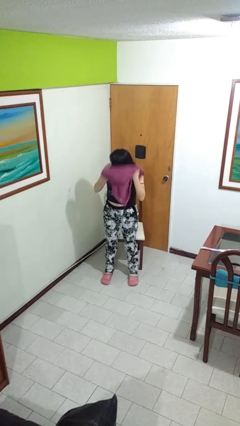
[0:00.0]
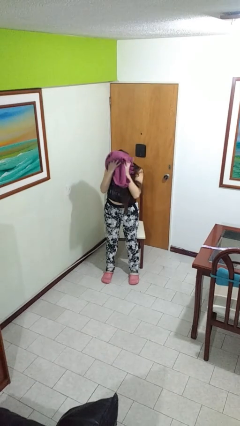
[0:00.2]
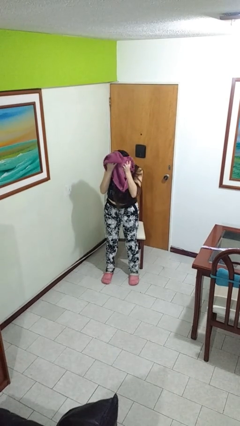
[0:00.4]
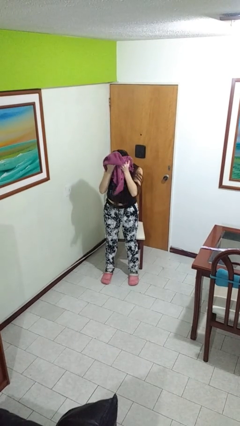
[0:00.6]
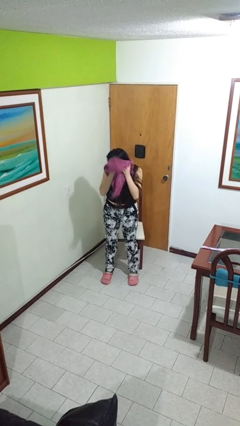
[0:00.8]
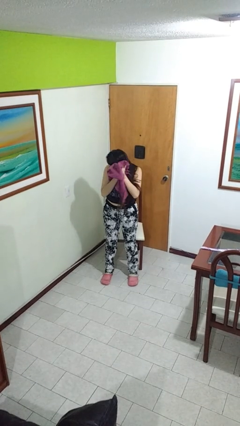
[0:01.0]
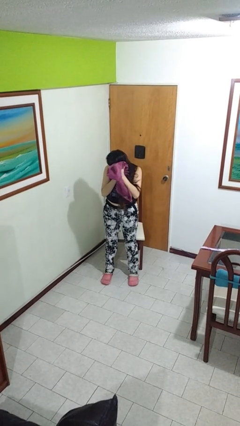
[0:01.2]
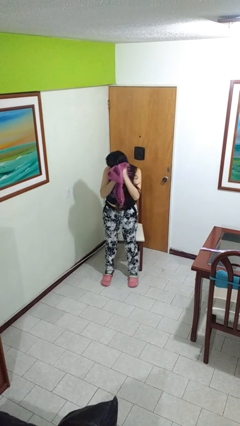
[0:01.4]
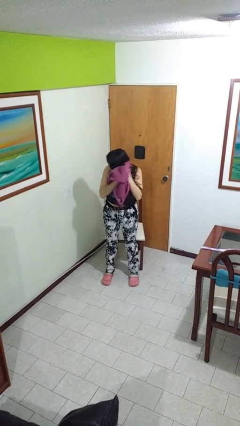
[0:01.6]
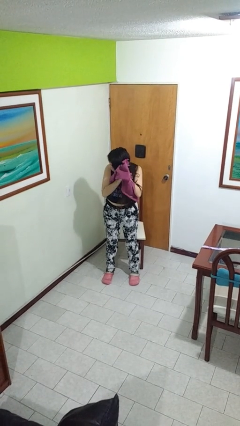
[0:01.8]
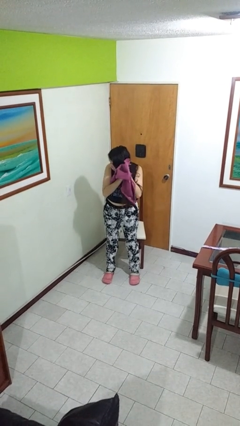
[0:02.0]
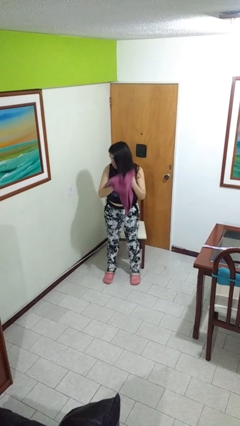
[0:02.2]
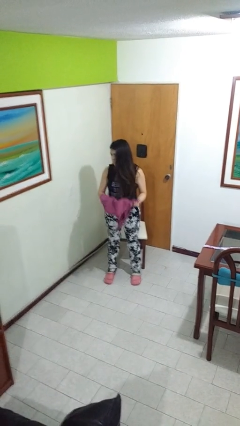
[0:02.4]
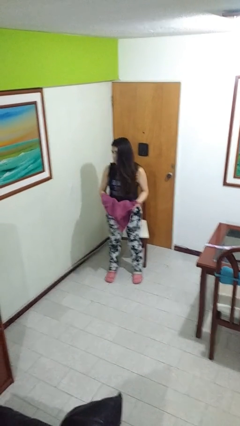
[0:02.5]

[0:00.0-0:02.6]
person dries hair with towel

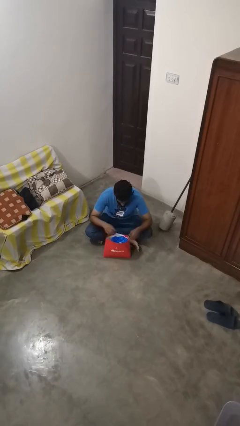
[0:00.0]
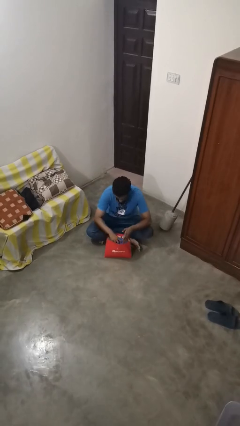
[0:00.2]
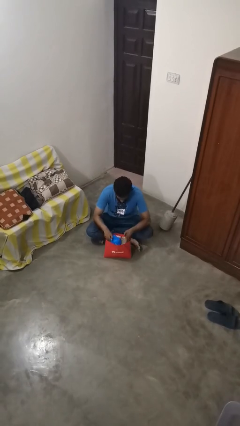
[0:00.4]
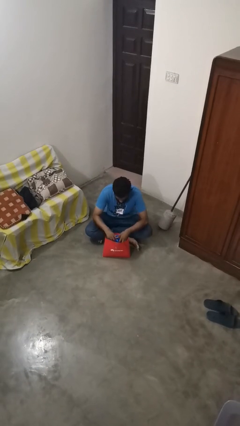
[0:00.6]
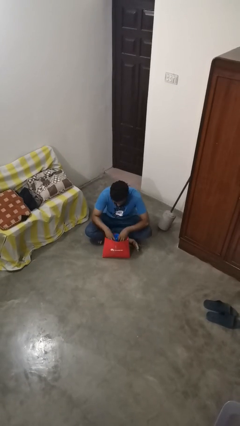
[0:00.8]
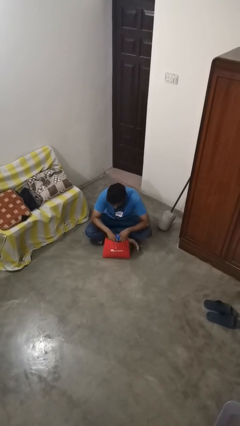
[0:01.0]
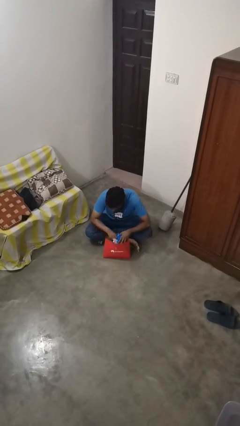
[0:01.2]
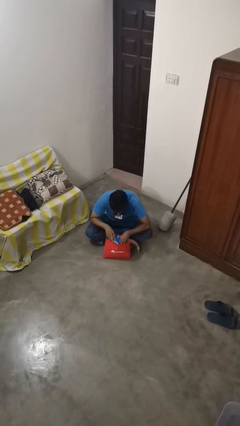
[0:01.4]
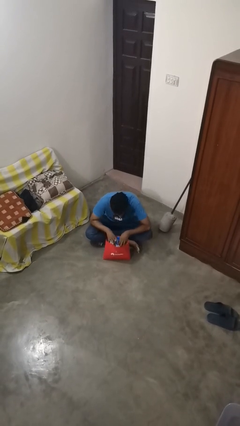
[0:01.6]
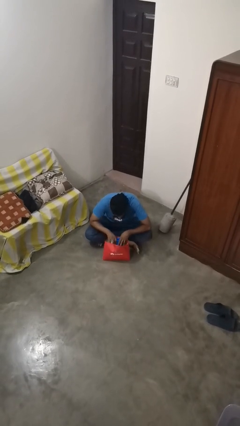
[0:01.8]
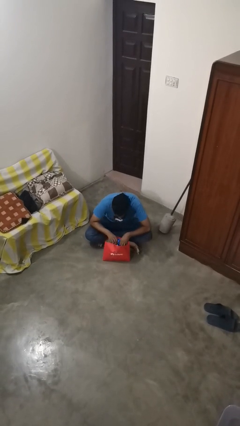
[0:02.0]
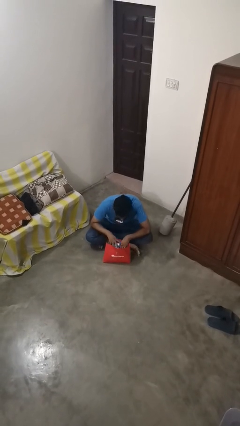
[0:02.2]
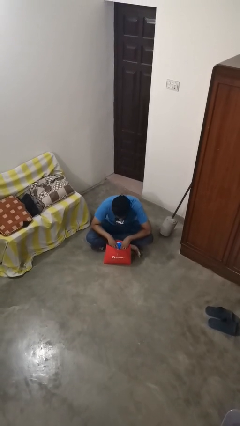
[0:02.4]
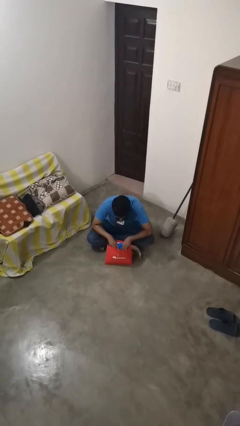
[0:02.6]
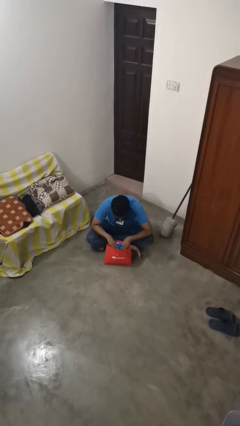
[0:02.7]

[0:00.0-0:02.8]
person searches in bag

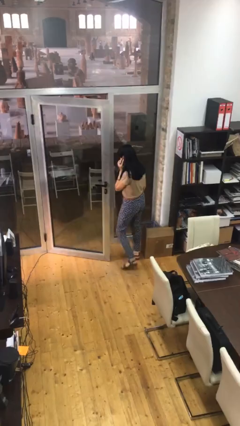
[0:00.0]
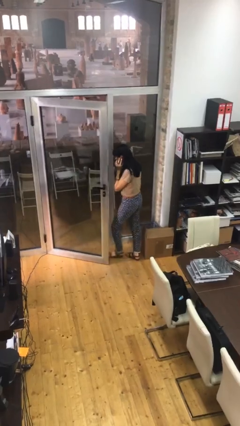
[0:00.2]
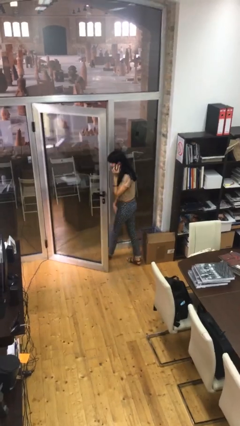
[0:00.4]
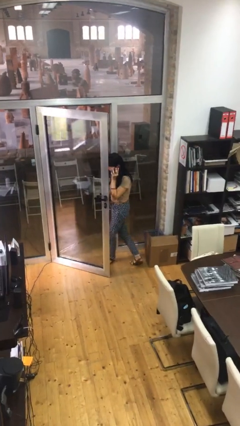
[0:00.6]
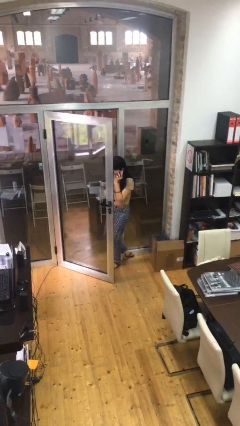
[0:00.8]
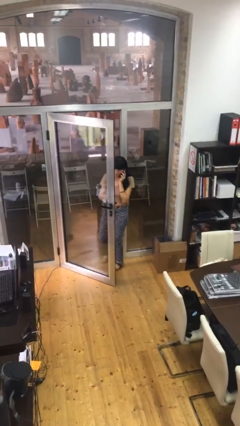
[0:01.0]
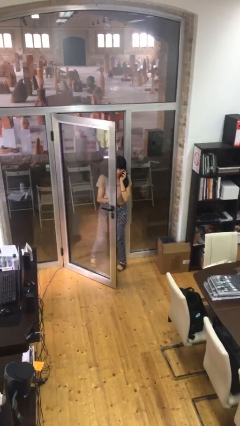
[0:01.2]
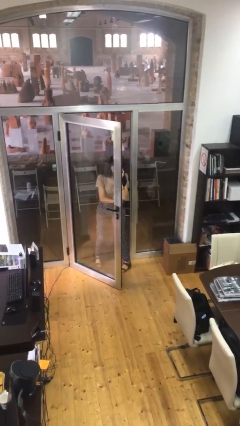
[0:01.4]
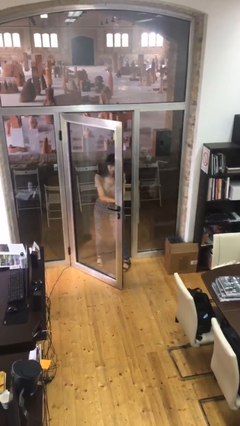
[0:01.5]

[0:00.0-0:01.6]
person exits scene through structure

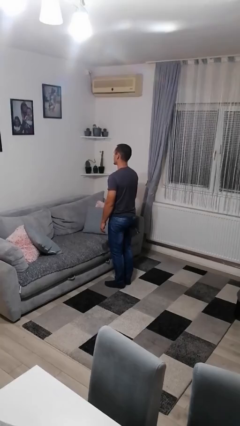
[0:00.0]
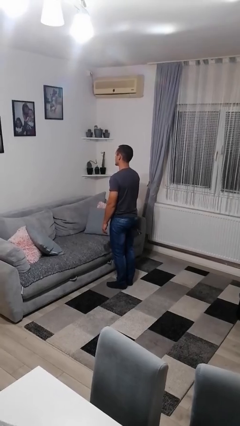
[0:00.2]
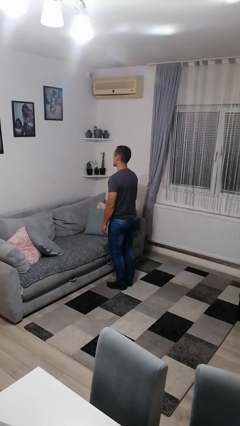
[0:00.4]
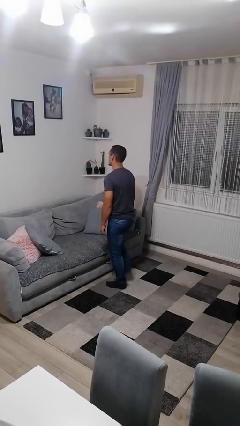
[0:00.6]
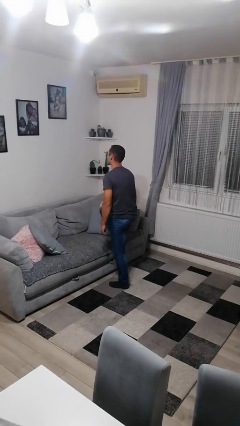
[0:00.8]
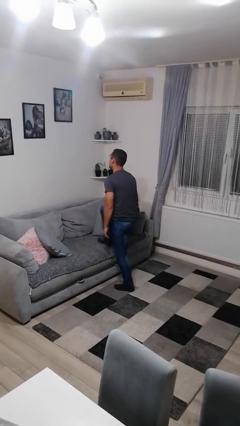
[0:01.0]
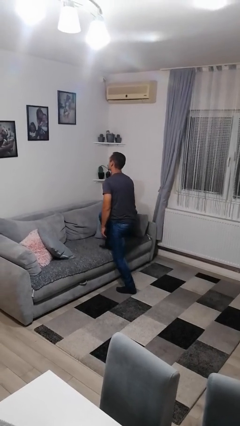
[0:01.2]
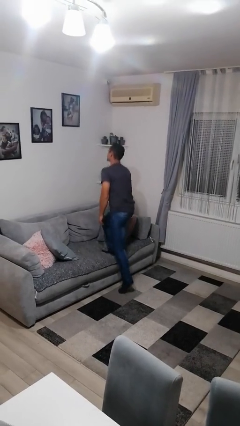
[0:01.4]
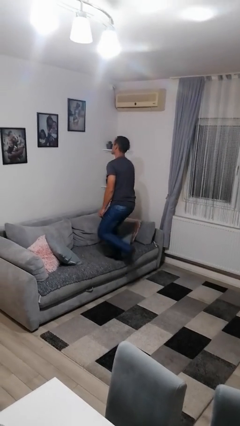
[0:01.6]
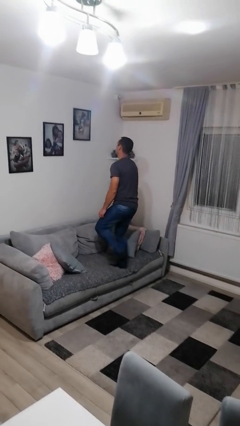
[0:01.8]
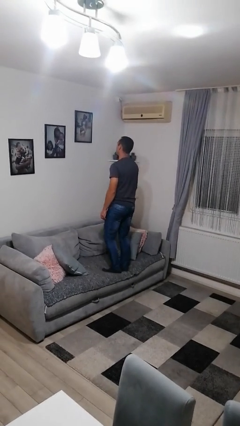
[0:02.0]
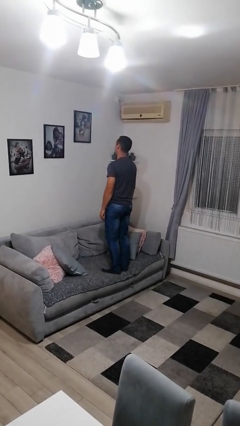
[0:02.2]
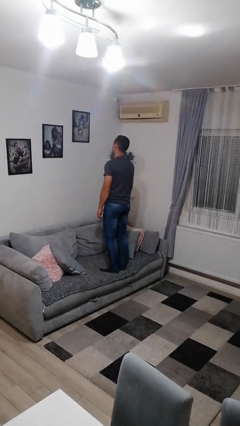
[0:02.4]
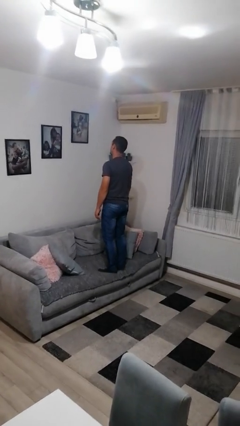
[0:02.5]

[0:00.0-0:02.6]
person climbs on couch

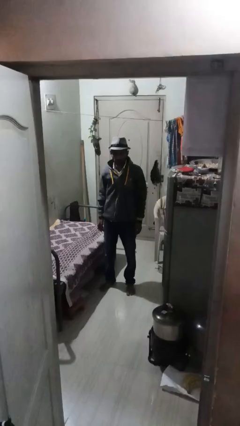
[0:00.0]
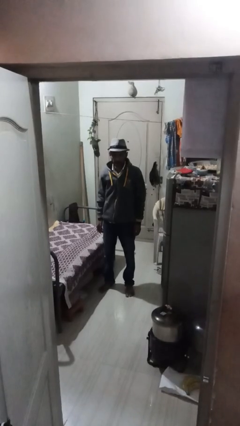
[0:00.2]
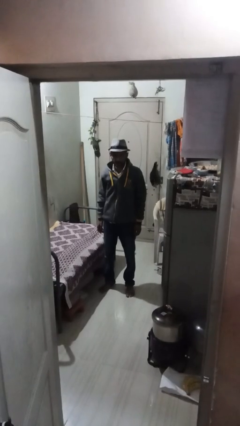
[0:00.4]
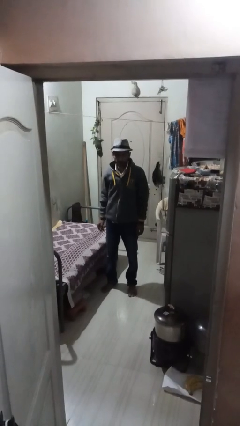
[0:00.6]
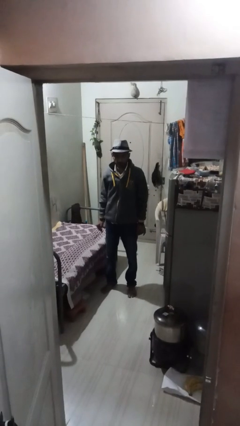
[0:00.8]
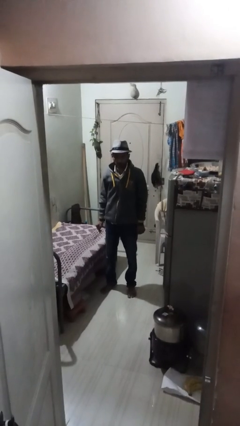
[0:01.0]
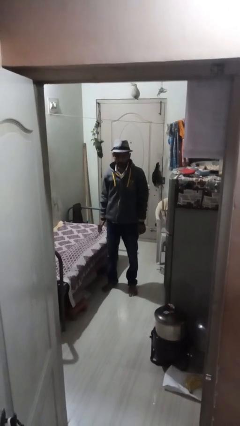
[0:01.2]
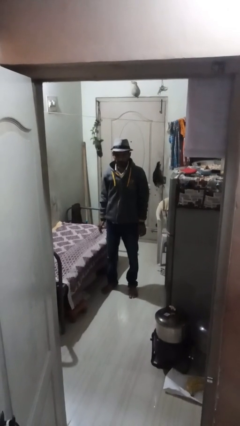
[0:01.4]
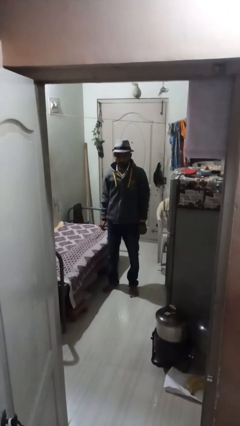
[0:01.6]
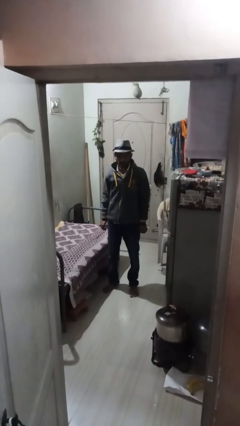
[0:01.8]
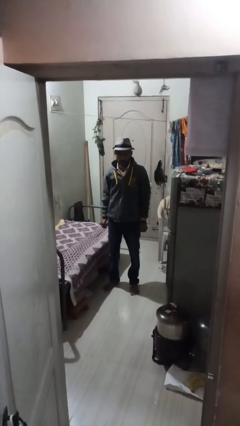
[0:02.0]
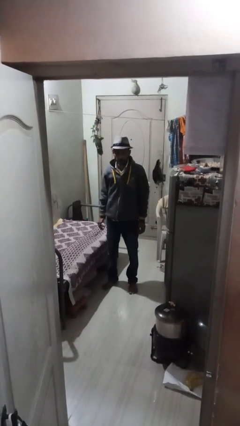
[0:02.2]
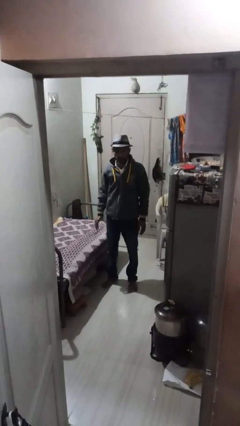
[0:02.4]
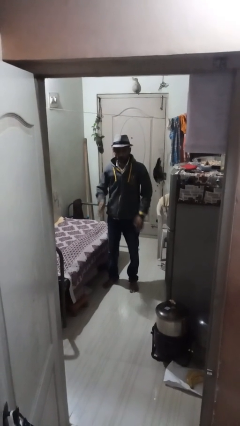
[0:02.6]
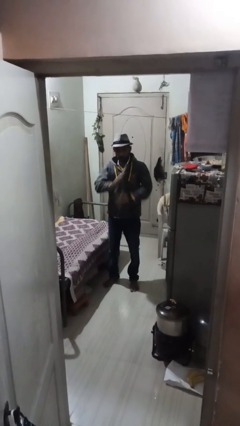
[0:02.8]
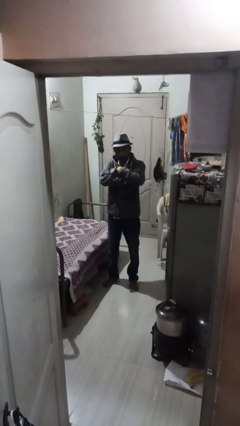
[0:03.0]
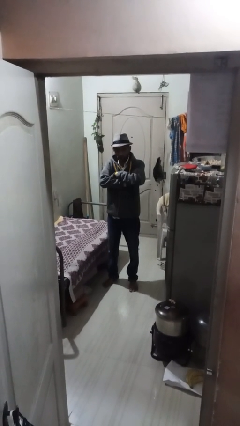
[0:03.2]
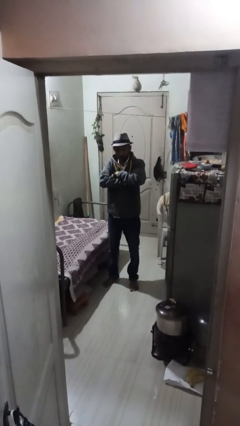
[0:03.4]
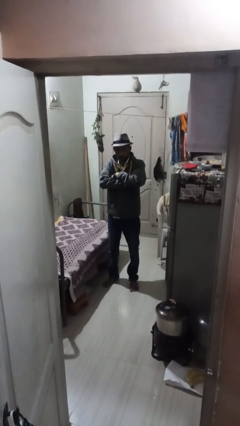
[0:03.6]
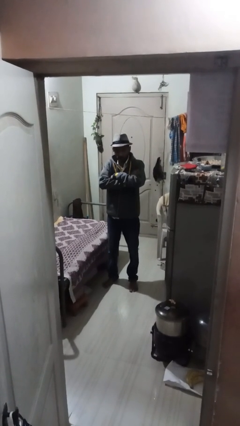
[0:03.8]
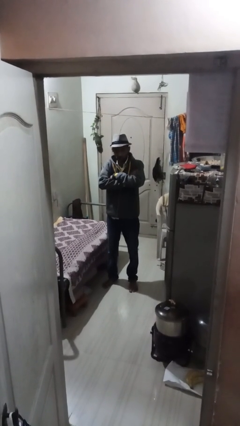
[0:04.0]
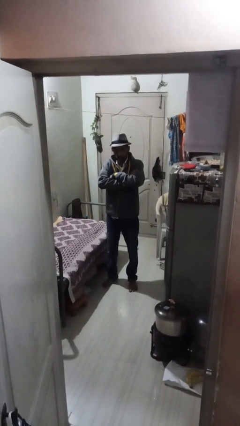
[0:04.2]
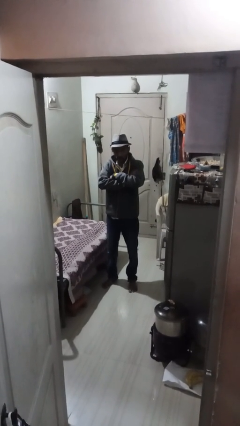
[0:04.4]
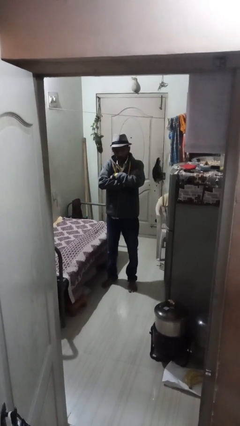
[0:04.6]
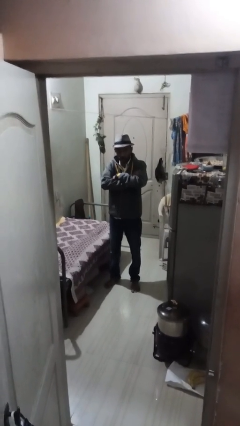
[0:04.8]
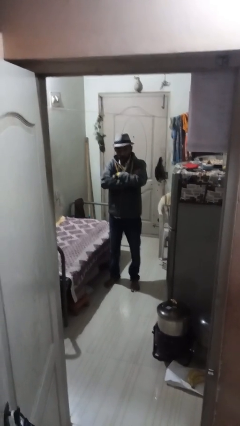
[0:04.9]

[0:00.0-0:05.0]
person crosses arms

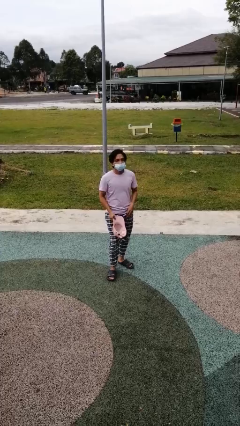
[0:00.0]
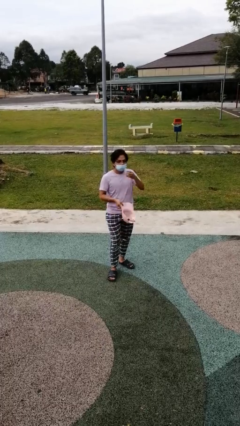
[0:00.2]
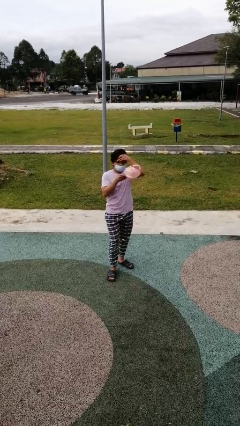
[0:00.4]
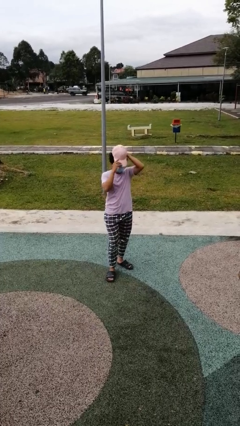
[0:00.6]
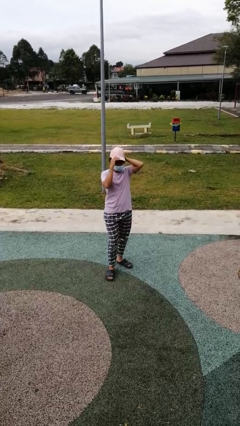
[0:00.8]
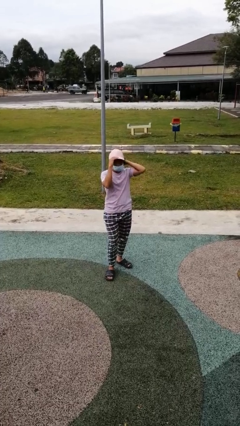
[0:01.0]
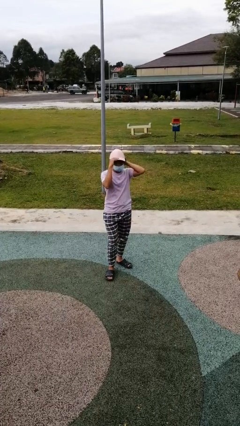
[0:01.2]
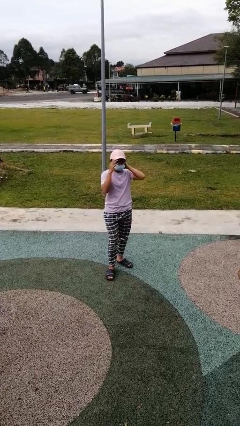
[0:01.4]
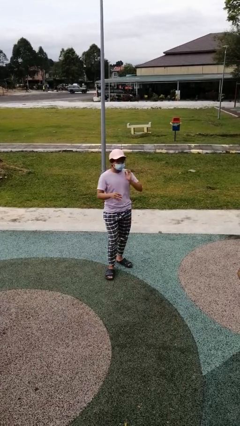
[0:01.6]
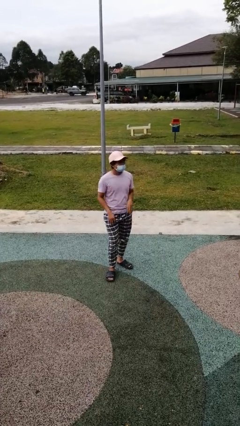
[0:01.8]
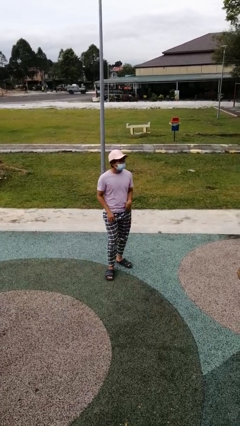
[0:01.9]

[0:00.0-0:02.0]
person puts on hat

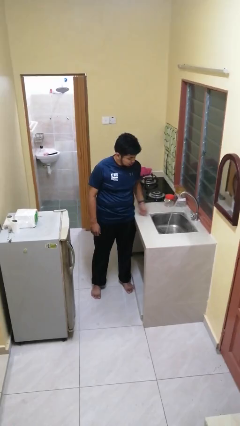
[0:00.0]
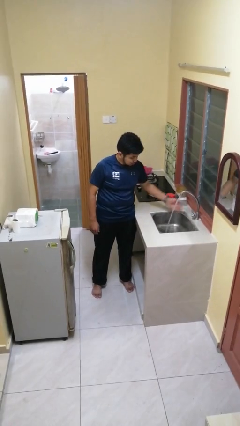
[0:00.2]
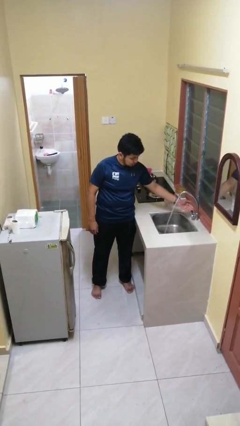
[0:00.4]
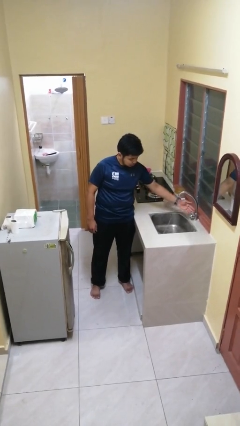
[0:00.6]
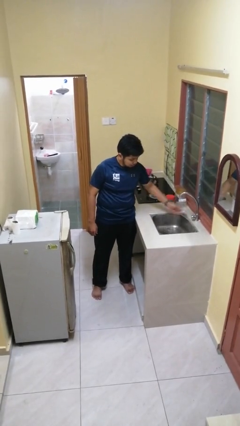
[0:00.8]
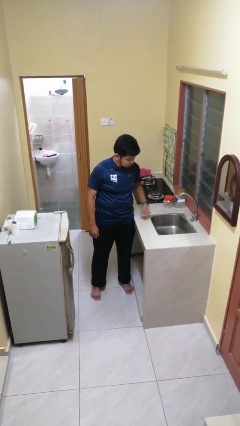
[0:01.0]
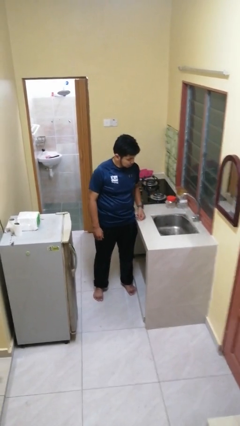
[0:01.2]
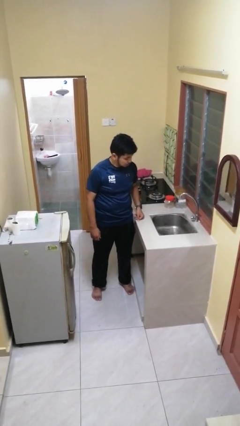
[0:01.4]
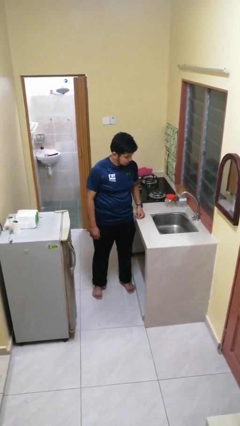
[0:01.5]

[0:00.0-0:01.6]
person turns off faucet
